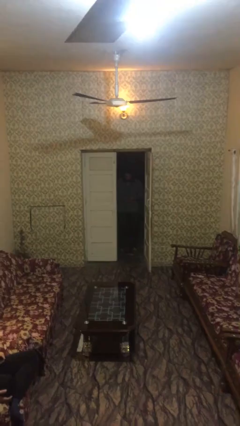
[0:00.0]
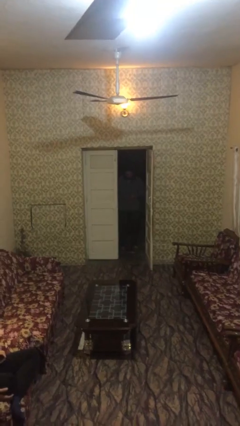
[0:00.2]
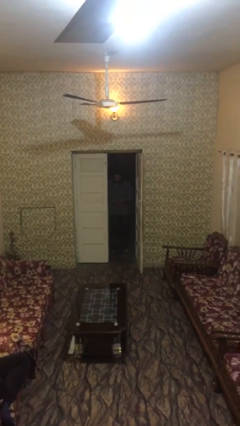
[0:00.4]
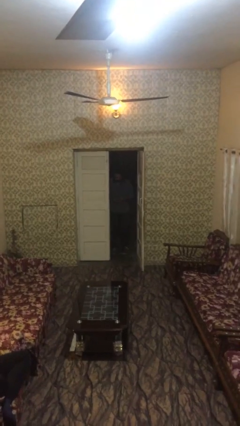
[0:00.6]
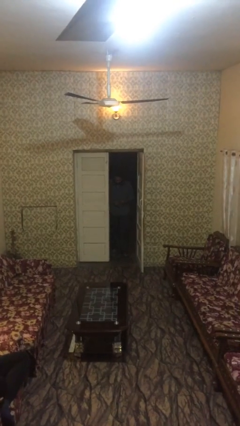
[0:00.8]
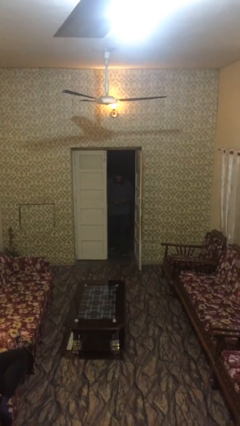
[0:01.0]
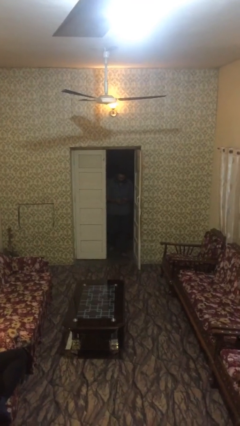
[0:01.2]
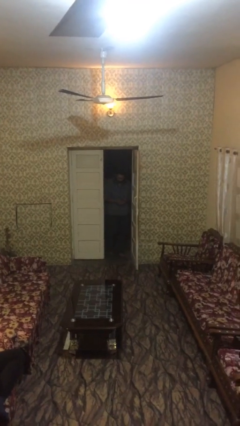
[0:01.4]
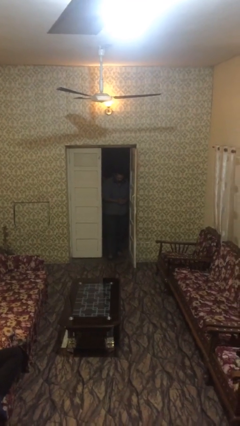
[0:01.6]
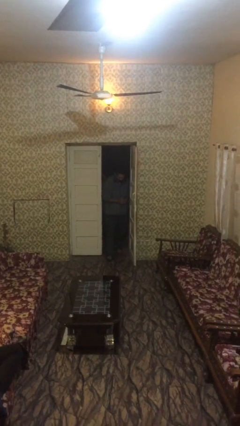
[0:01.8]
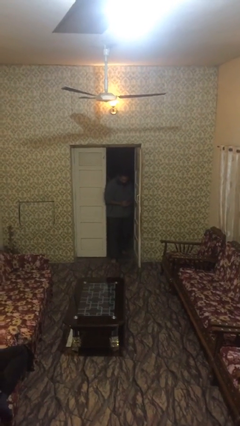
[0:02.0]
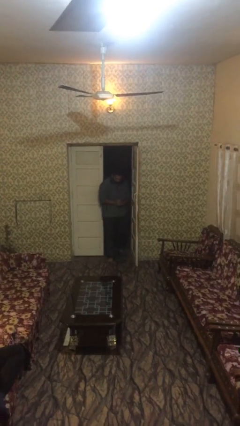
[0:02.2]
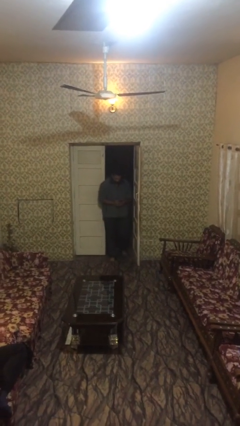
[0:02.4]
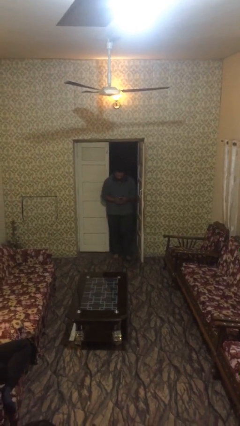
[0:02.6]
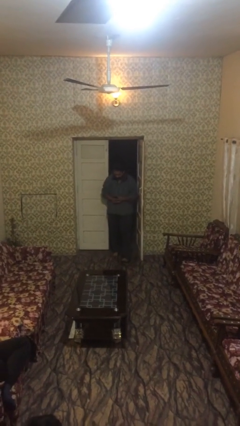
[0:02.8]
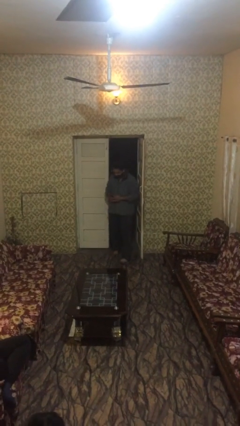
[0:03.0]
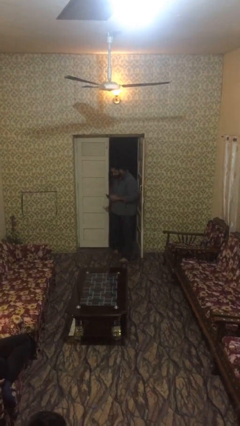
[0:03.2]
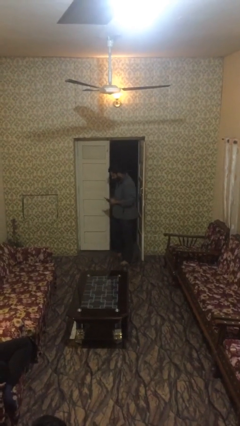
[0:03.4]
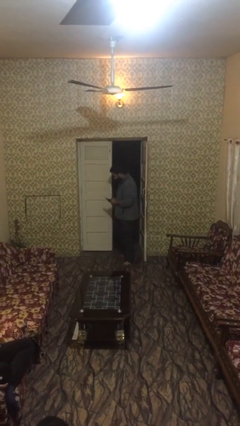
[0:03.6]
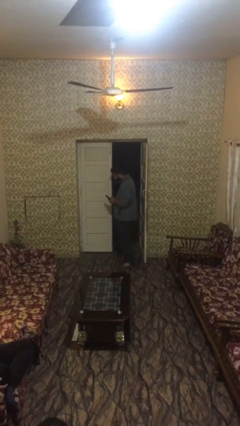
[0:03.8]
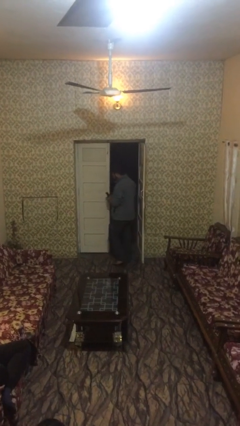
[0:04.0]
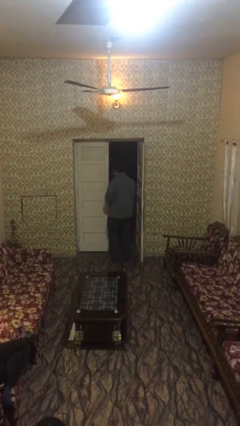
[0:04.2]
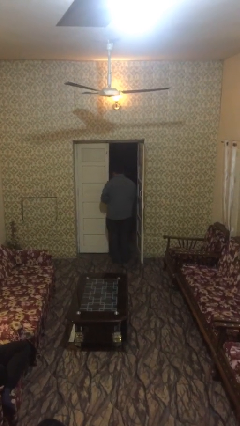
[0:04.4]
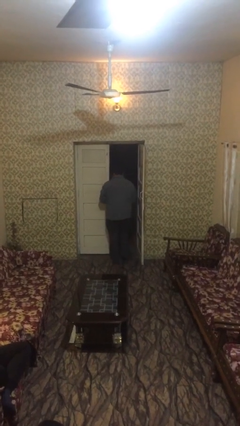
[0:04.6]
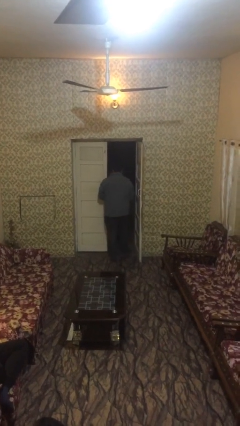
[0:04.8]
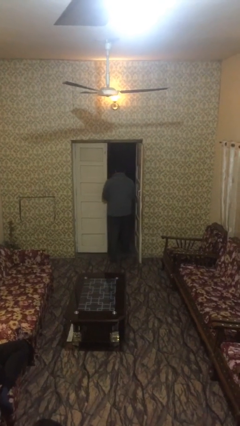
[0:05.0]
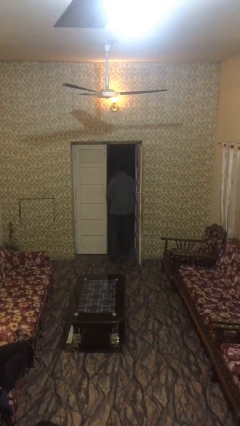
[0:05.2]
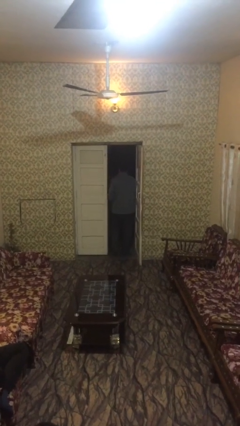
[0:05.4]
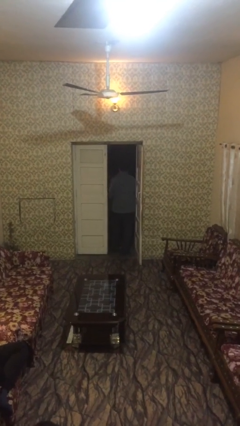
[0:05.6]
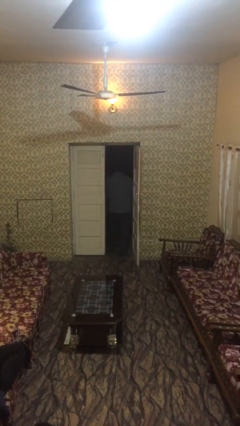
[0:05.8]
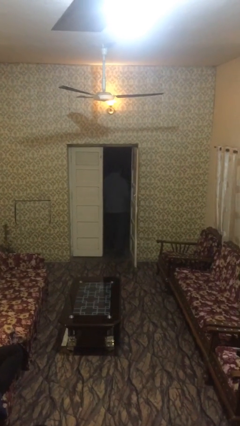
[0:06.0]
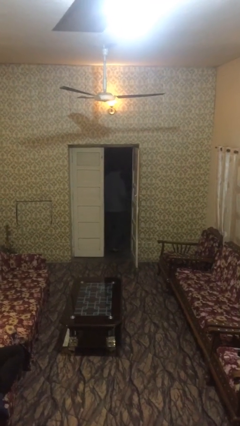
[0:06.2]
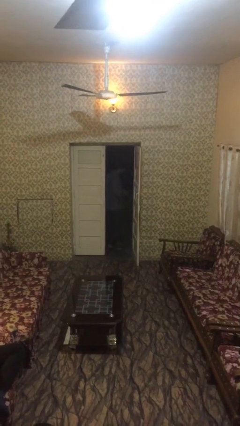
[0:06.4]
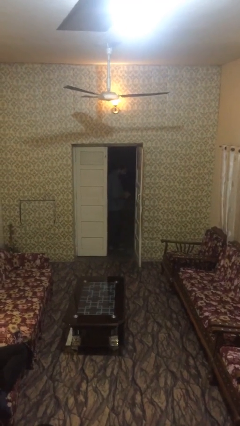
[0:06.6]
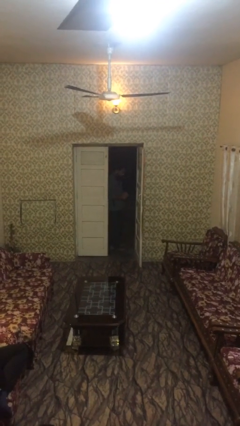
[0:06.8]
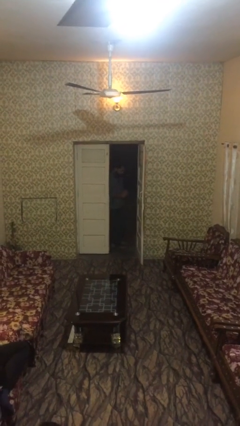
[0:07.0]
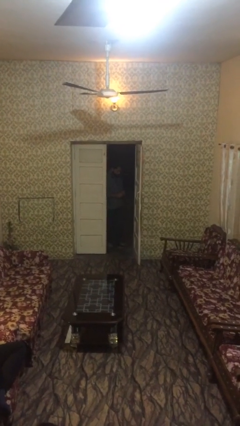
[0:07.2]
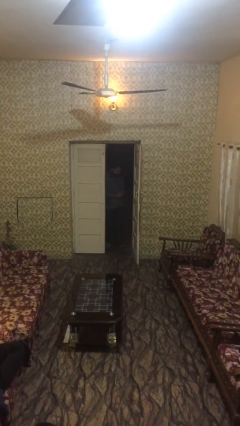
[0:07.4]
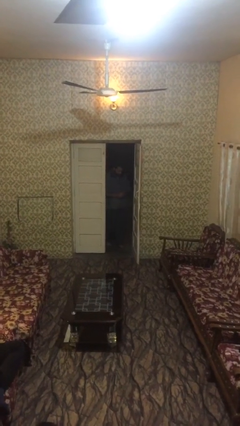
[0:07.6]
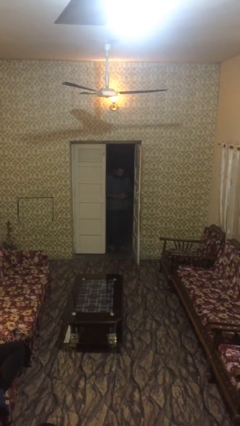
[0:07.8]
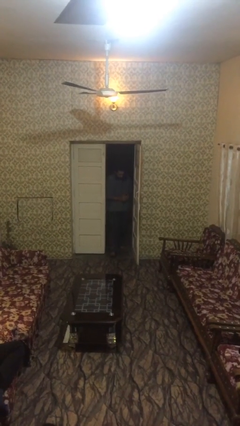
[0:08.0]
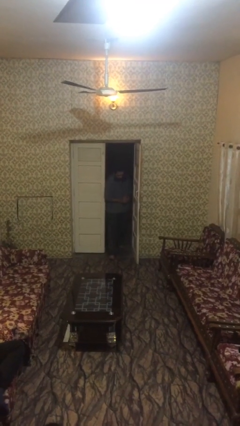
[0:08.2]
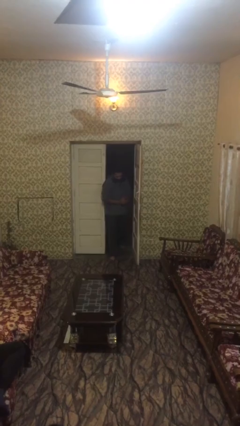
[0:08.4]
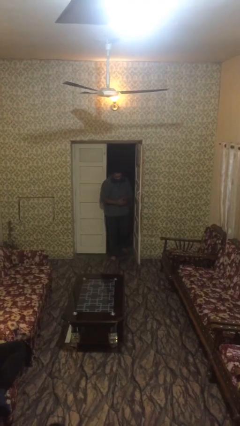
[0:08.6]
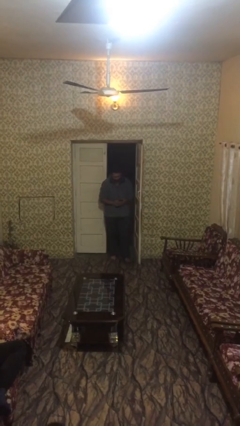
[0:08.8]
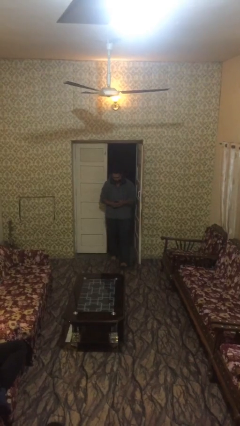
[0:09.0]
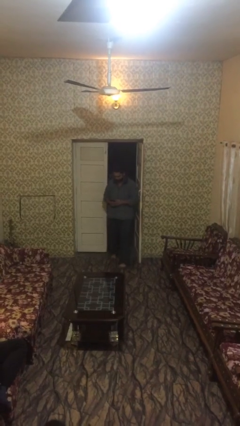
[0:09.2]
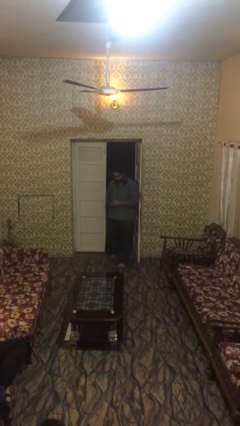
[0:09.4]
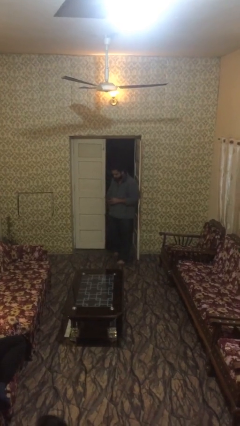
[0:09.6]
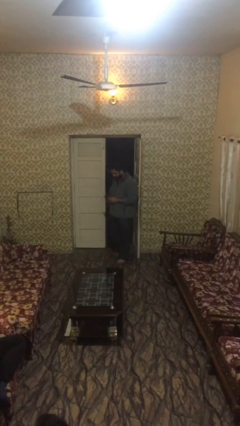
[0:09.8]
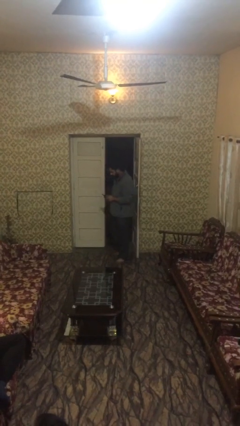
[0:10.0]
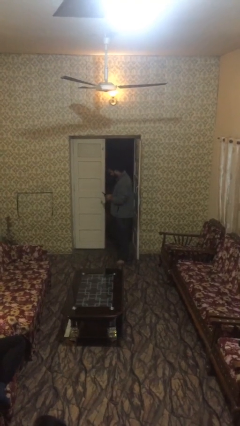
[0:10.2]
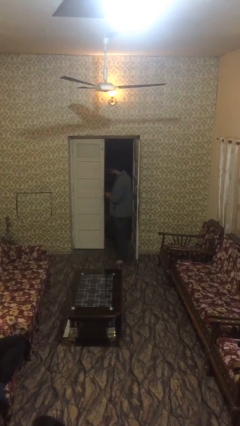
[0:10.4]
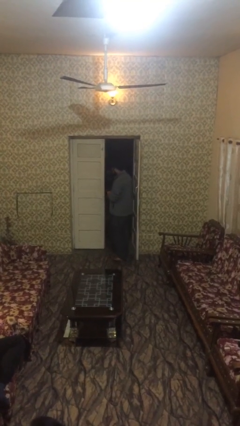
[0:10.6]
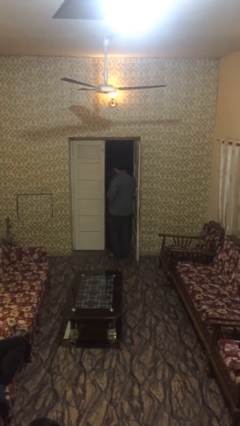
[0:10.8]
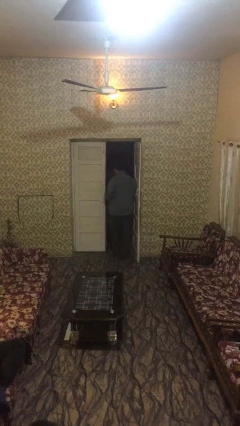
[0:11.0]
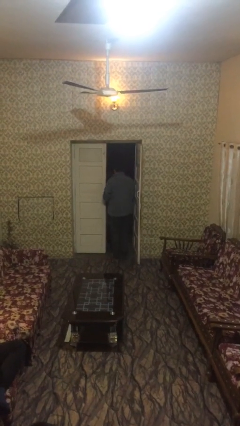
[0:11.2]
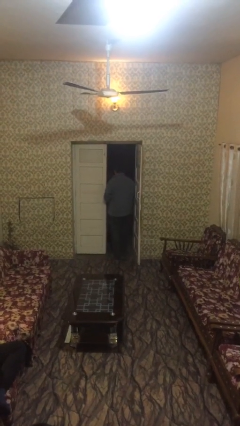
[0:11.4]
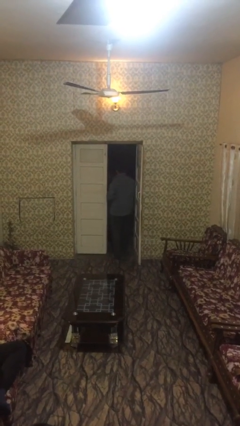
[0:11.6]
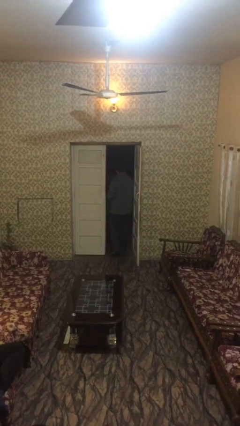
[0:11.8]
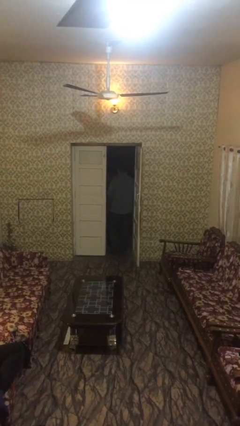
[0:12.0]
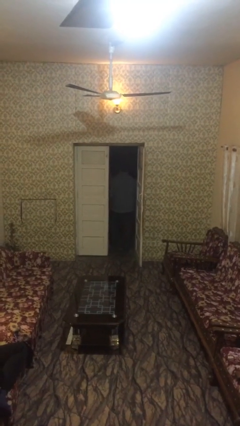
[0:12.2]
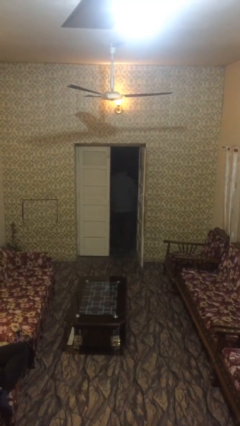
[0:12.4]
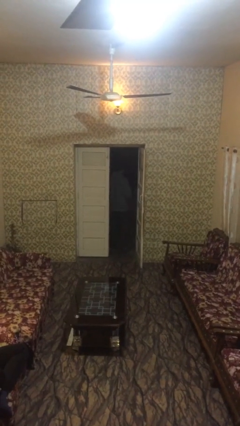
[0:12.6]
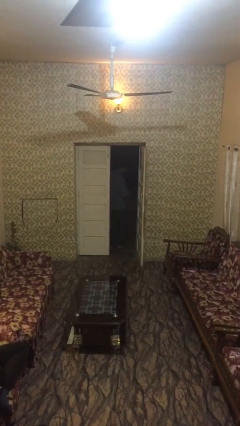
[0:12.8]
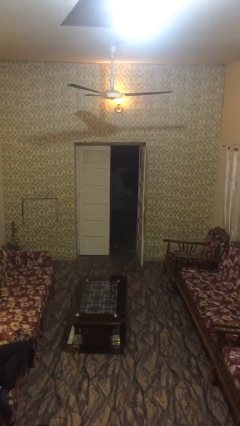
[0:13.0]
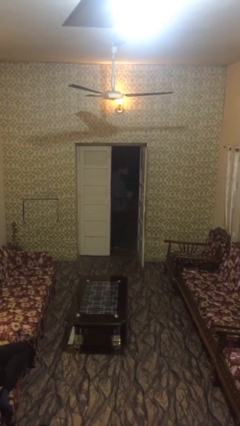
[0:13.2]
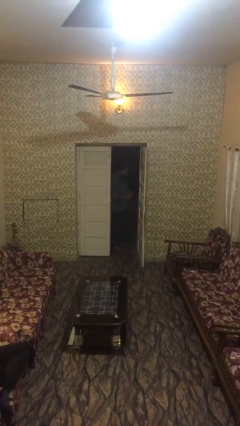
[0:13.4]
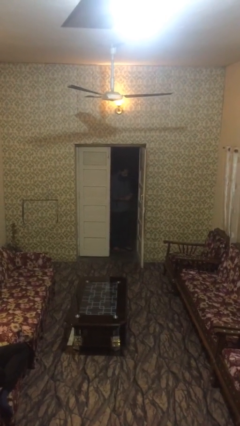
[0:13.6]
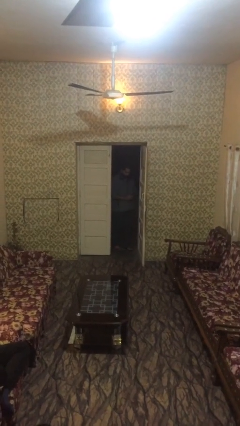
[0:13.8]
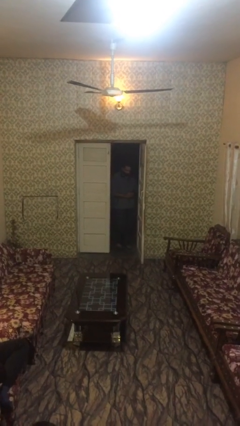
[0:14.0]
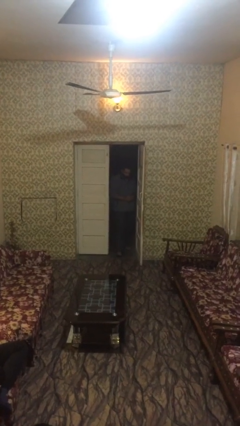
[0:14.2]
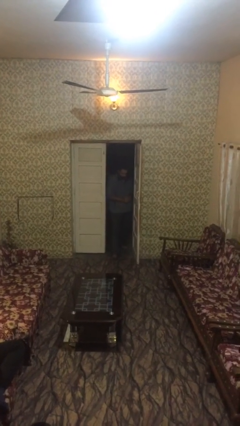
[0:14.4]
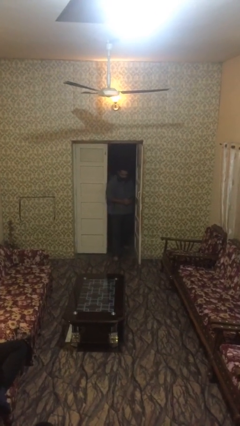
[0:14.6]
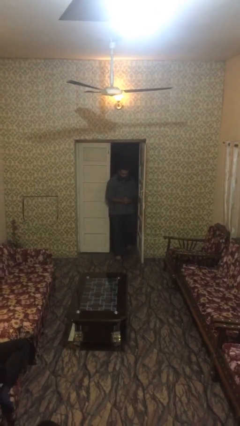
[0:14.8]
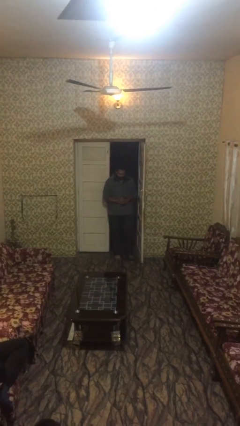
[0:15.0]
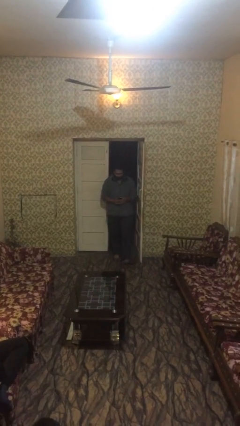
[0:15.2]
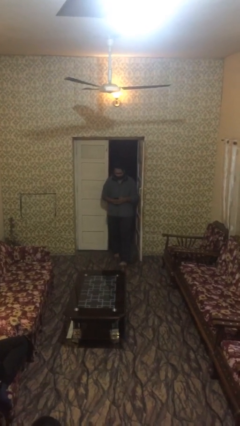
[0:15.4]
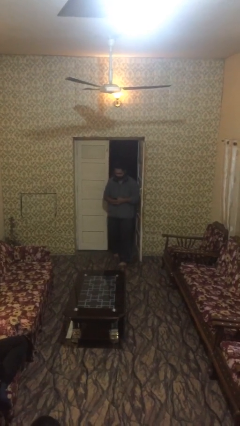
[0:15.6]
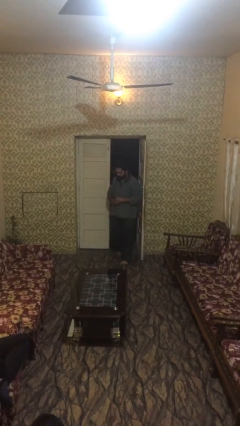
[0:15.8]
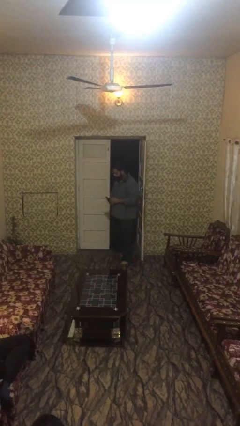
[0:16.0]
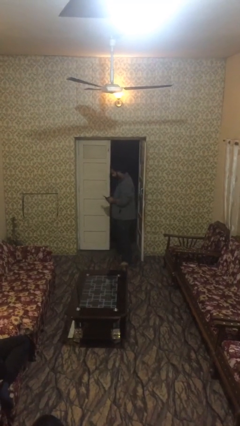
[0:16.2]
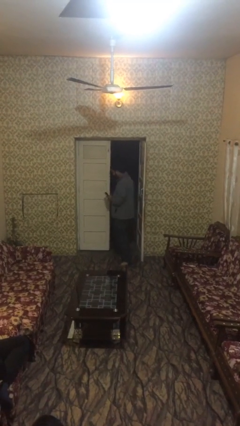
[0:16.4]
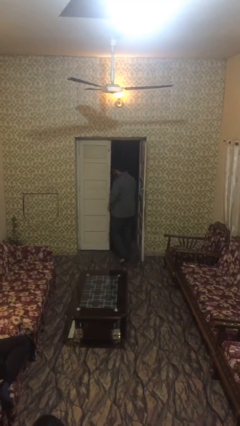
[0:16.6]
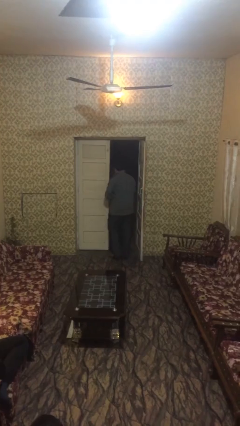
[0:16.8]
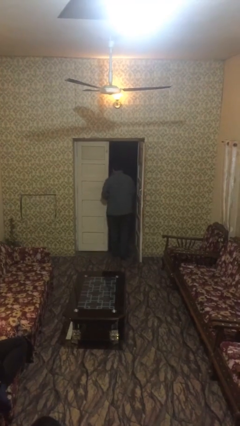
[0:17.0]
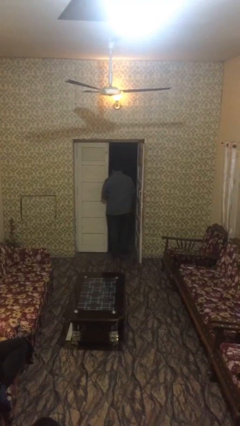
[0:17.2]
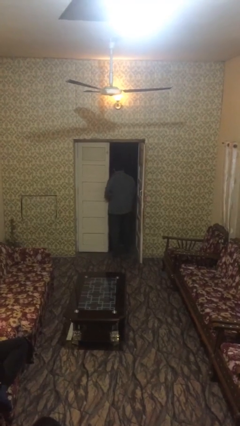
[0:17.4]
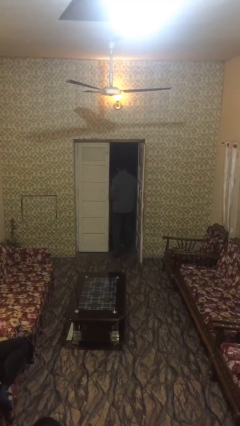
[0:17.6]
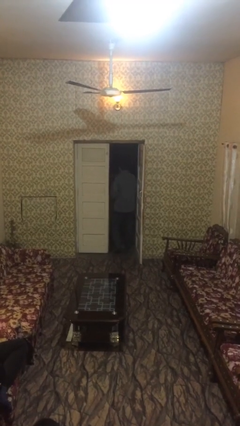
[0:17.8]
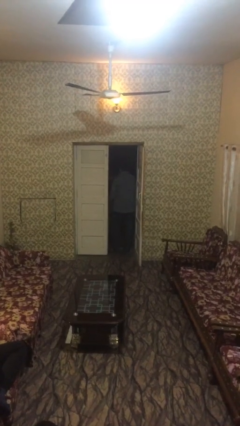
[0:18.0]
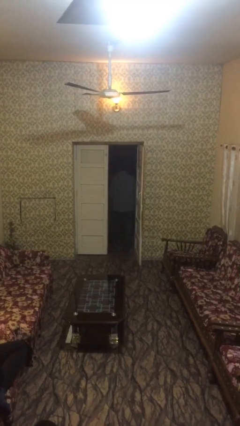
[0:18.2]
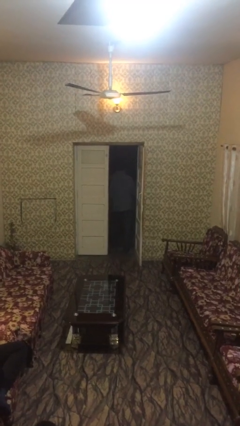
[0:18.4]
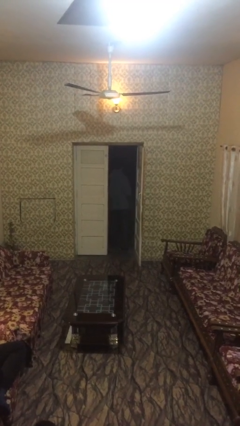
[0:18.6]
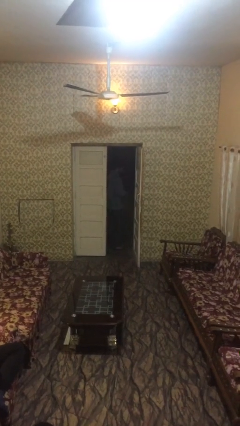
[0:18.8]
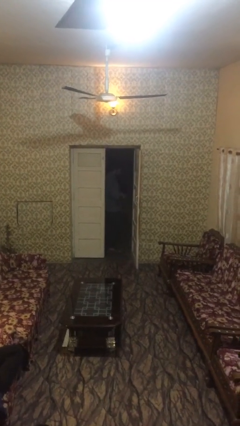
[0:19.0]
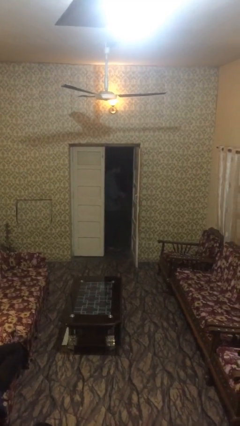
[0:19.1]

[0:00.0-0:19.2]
person texts on phone
